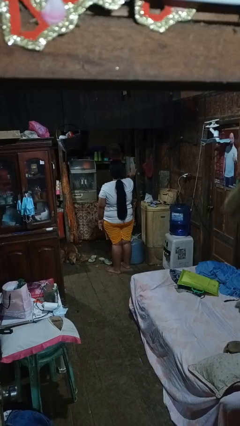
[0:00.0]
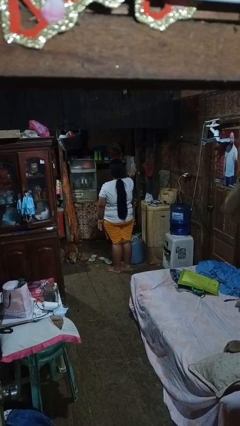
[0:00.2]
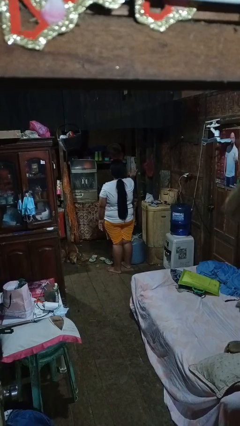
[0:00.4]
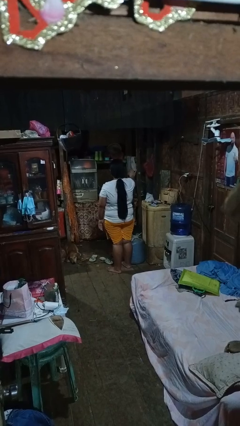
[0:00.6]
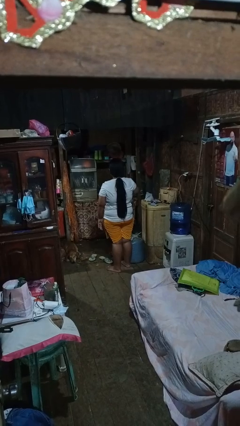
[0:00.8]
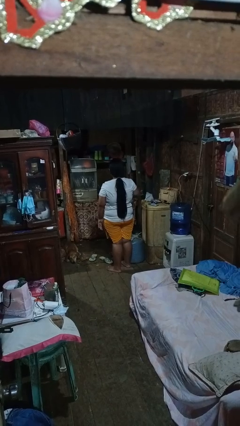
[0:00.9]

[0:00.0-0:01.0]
person gestures stop

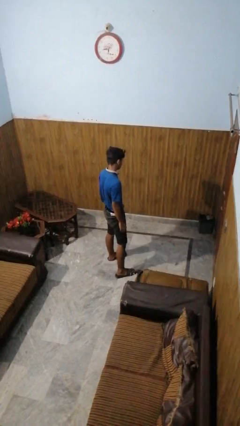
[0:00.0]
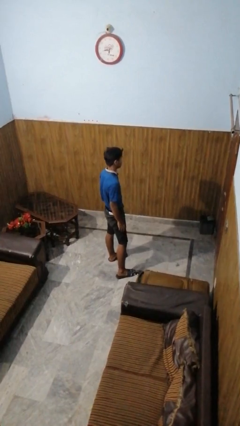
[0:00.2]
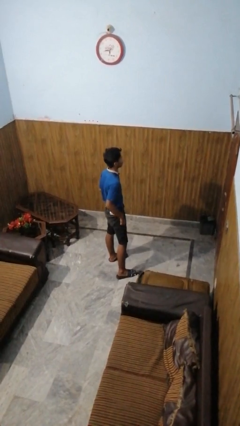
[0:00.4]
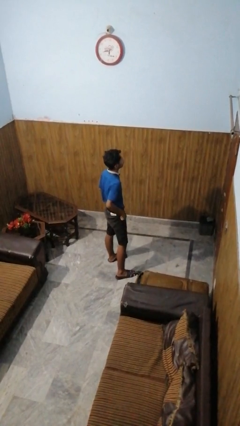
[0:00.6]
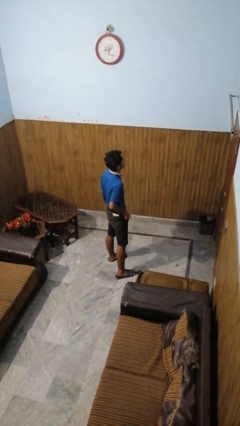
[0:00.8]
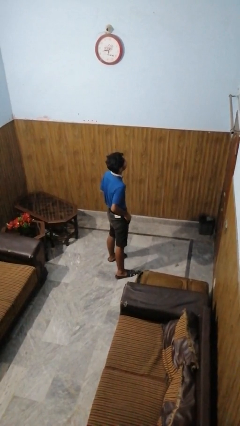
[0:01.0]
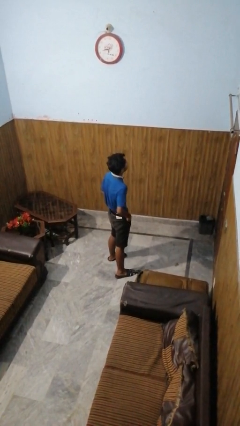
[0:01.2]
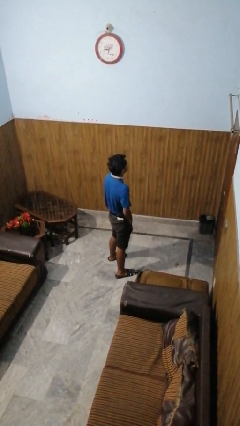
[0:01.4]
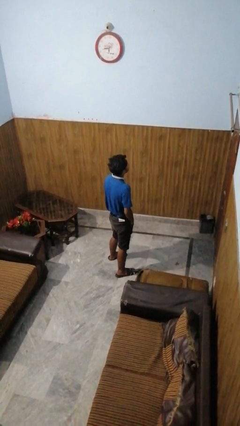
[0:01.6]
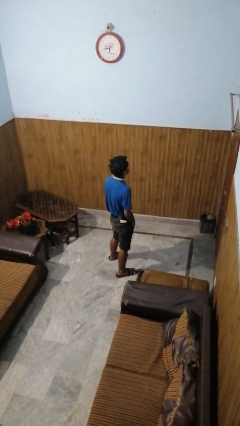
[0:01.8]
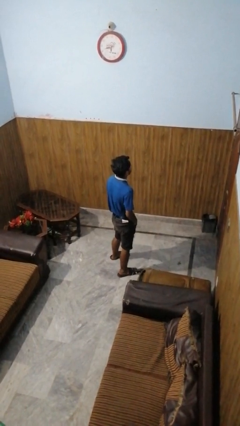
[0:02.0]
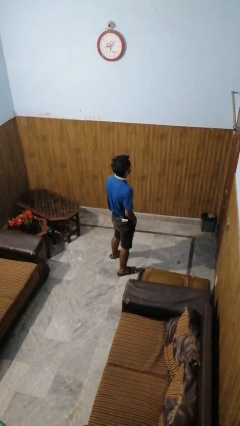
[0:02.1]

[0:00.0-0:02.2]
person puts hands in back pockets

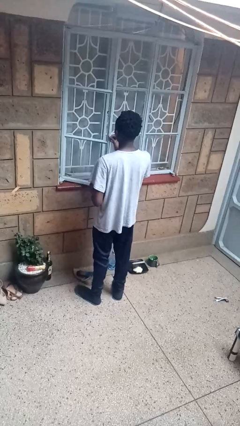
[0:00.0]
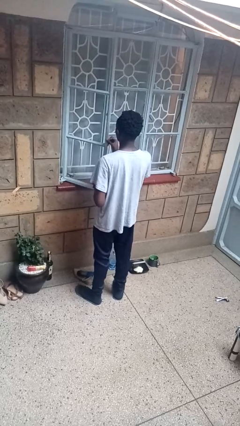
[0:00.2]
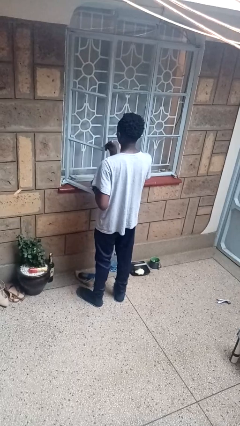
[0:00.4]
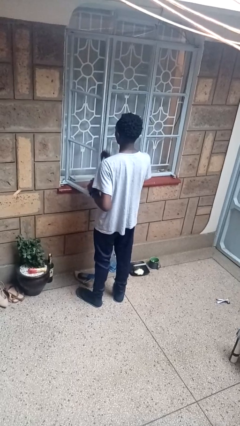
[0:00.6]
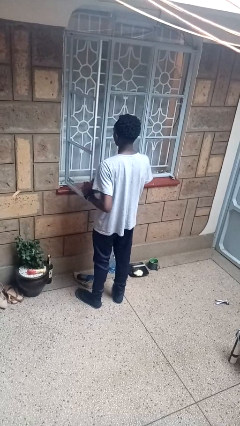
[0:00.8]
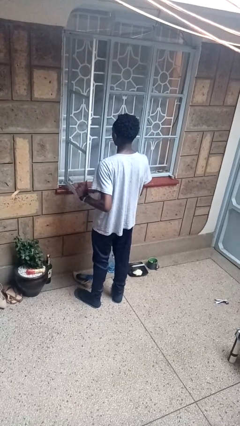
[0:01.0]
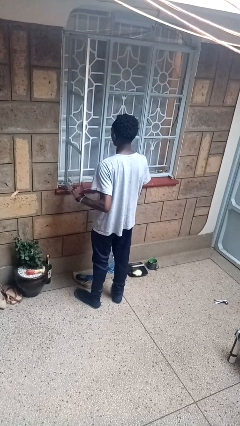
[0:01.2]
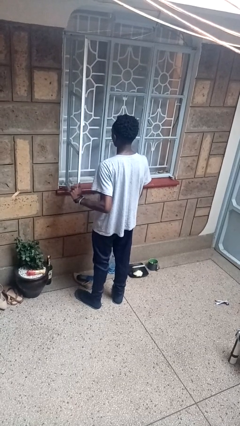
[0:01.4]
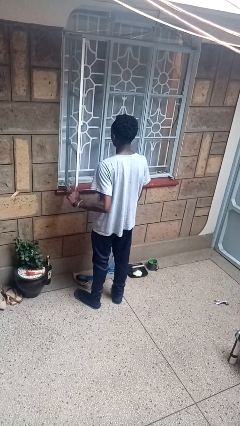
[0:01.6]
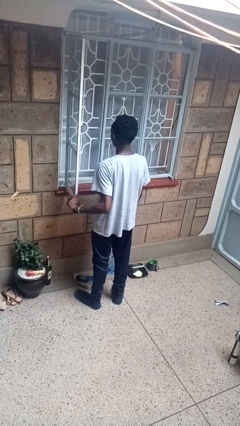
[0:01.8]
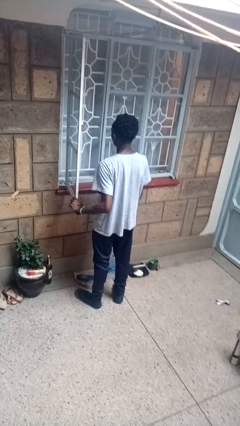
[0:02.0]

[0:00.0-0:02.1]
person opens home window

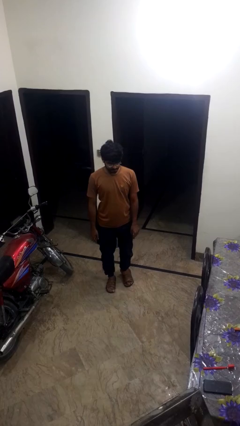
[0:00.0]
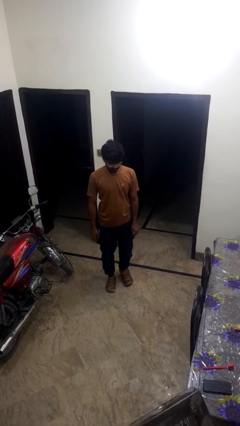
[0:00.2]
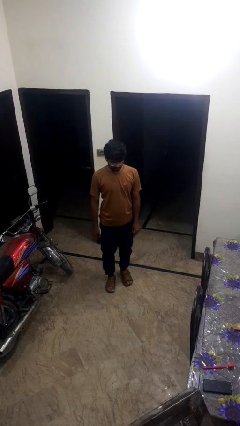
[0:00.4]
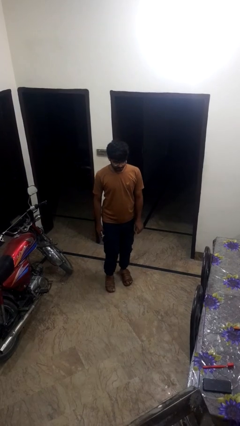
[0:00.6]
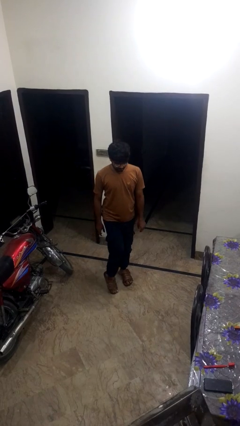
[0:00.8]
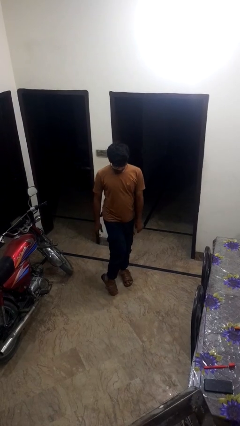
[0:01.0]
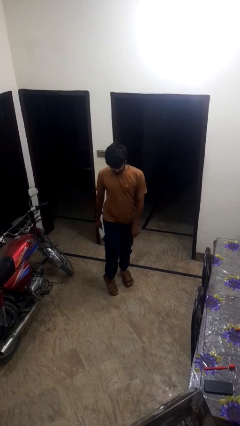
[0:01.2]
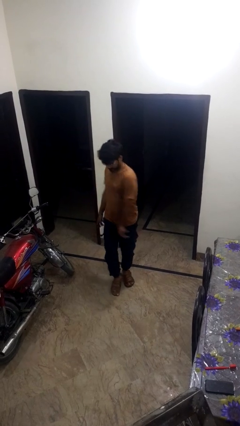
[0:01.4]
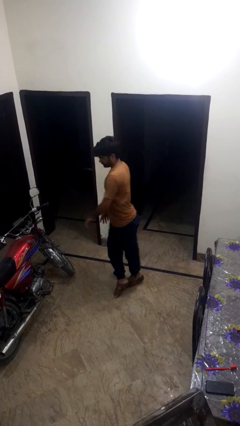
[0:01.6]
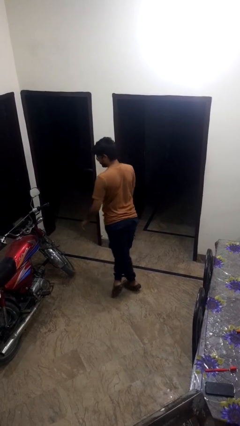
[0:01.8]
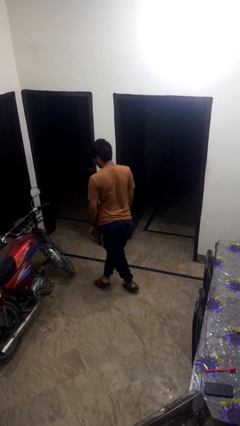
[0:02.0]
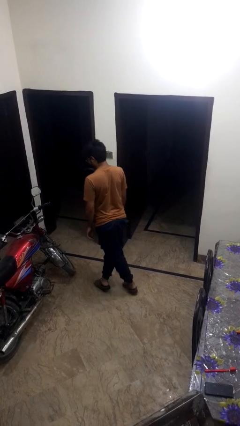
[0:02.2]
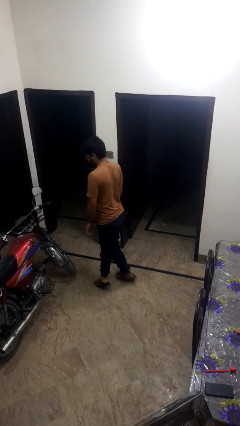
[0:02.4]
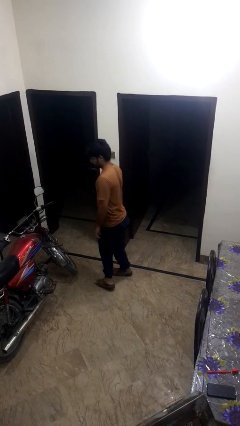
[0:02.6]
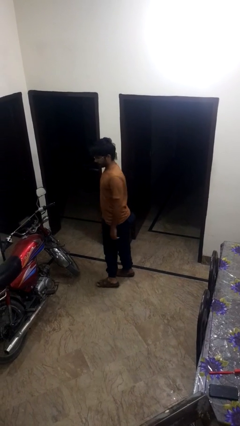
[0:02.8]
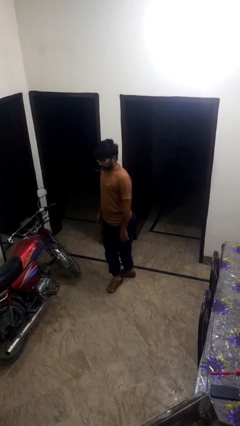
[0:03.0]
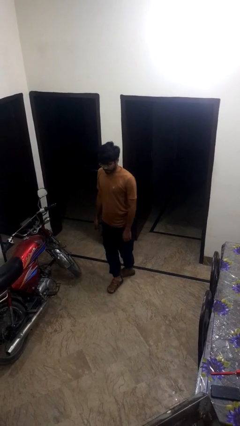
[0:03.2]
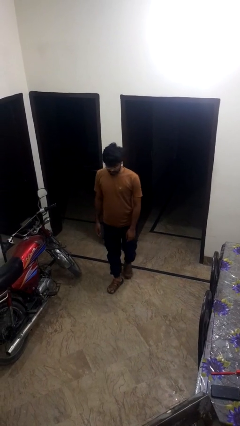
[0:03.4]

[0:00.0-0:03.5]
person twirls

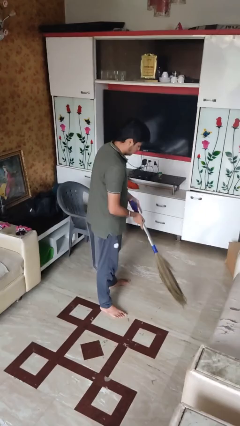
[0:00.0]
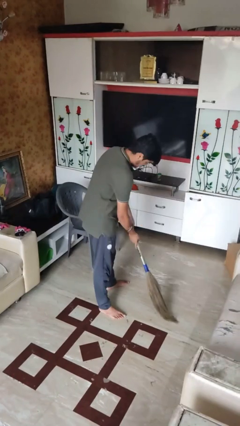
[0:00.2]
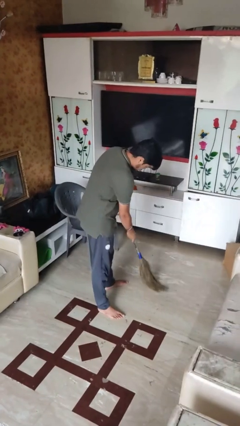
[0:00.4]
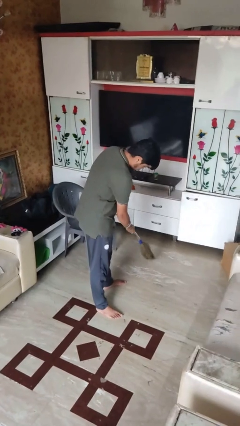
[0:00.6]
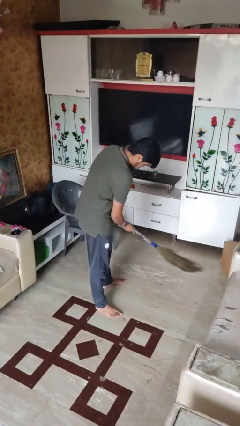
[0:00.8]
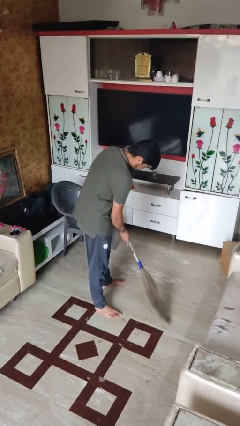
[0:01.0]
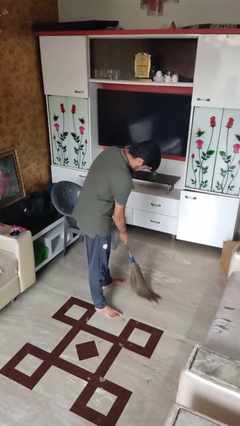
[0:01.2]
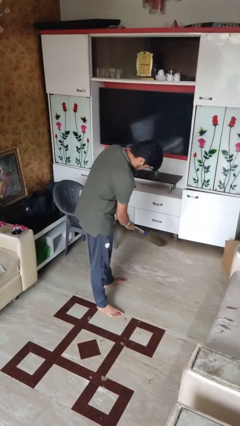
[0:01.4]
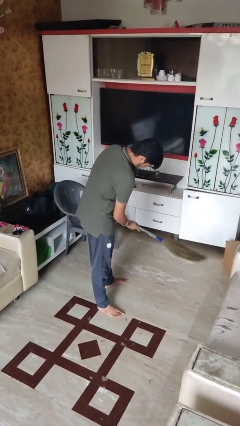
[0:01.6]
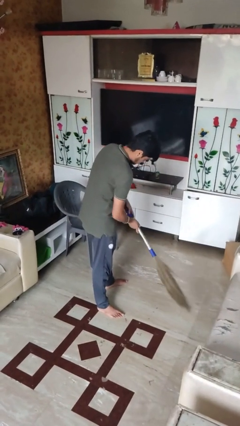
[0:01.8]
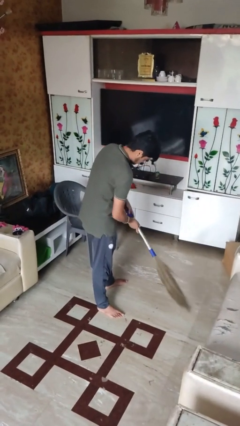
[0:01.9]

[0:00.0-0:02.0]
person sweeps floor

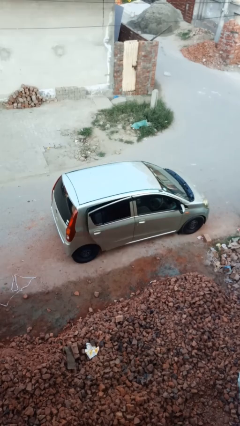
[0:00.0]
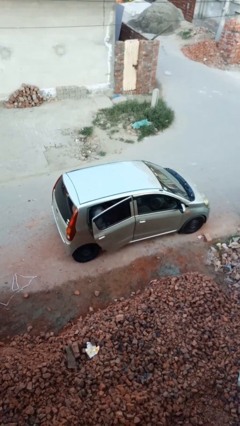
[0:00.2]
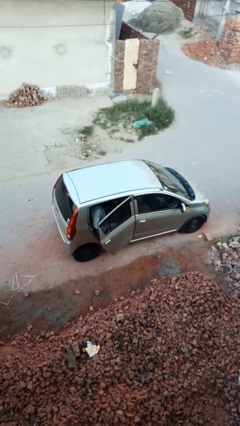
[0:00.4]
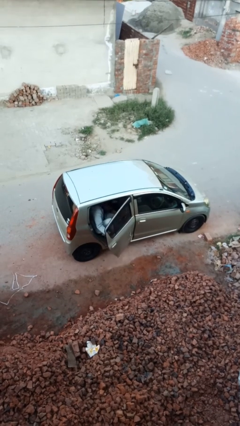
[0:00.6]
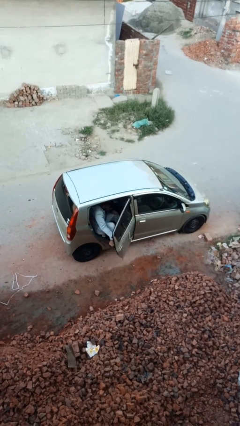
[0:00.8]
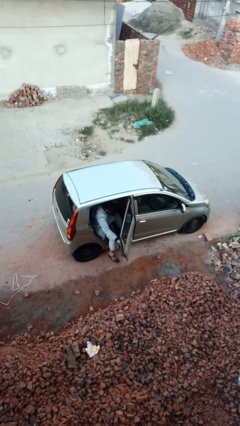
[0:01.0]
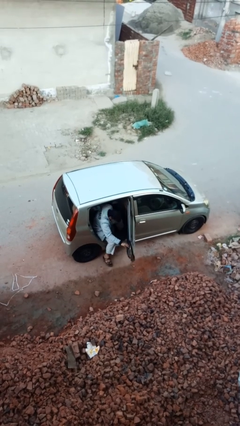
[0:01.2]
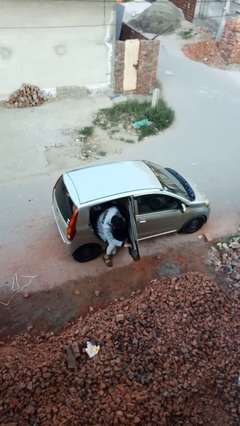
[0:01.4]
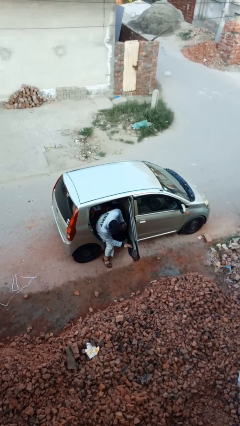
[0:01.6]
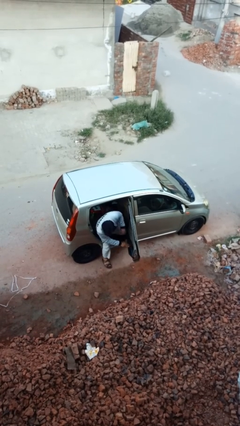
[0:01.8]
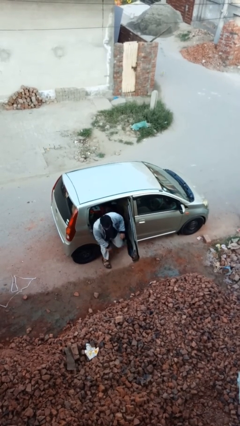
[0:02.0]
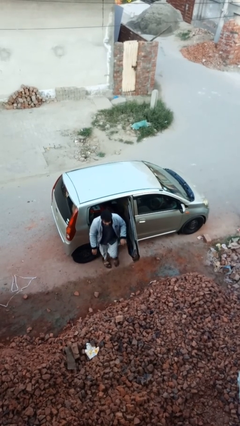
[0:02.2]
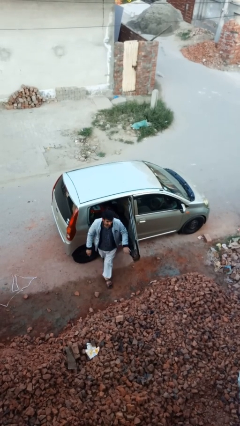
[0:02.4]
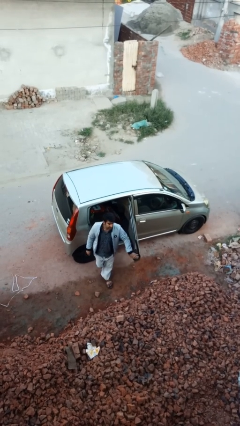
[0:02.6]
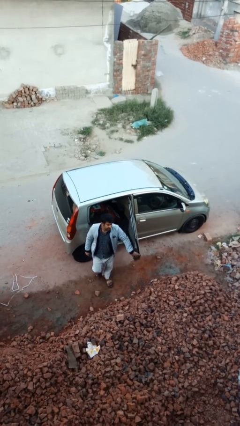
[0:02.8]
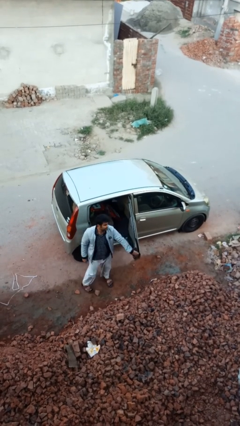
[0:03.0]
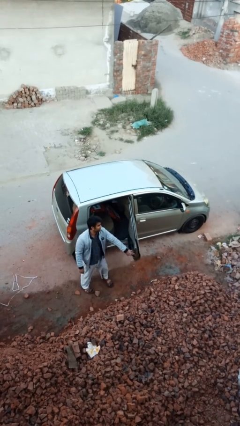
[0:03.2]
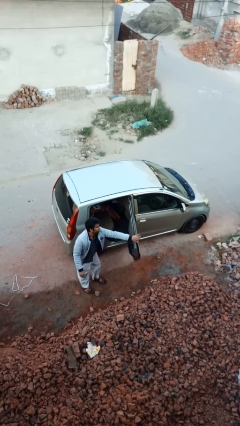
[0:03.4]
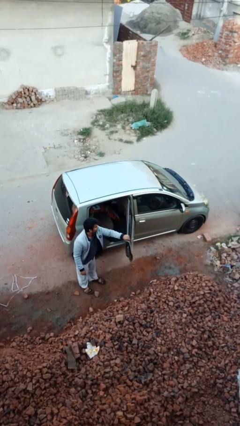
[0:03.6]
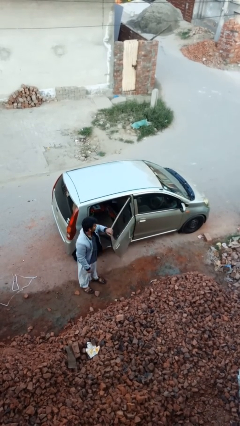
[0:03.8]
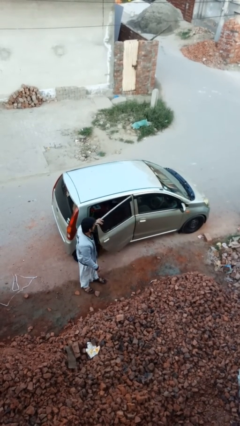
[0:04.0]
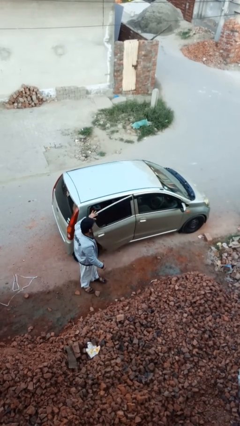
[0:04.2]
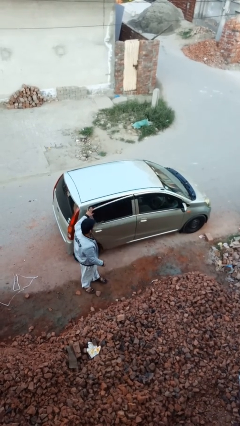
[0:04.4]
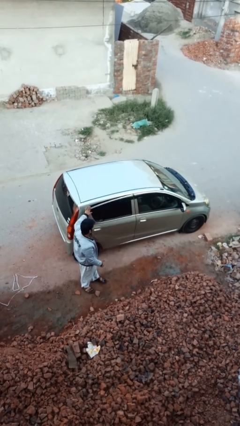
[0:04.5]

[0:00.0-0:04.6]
car drops off person

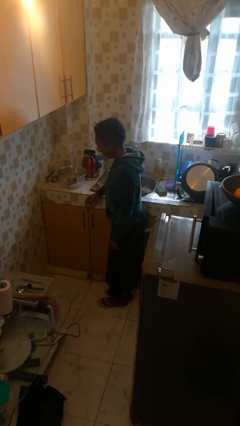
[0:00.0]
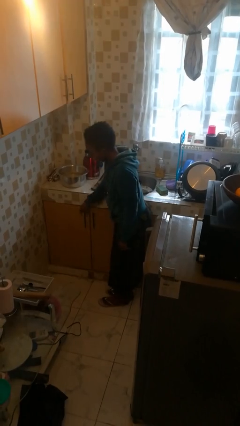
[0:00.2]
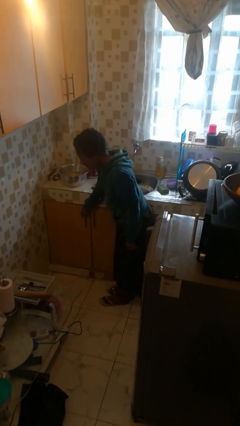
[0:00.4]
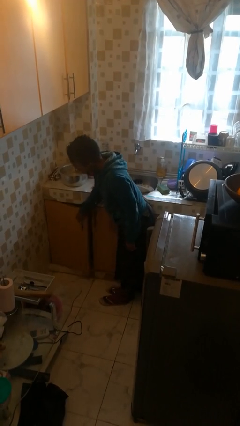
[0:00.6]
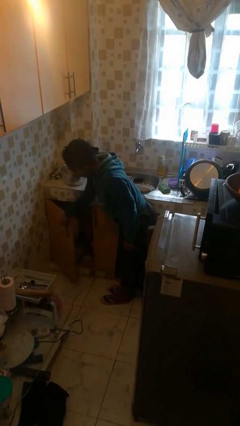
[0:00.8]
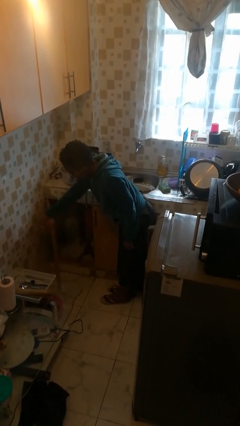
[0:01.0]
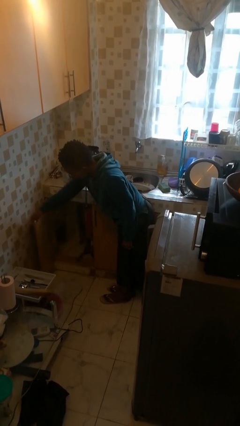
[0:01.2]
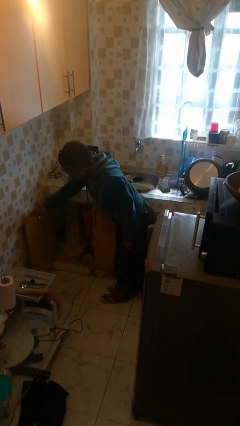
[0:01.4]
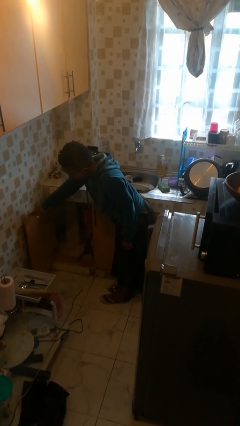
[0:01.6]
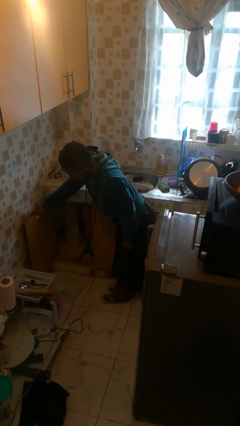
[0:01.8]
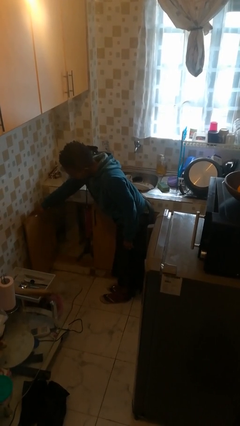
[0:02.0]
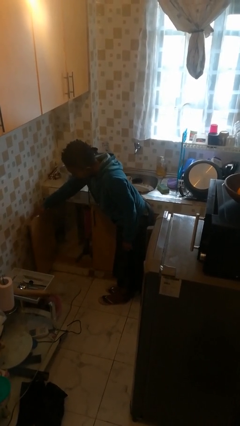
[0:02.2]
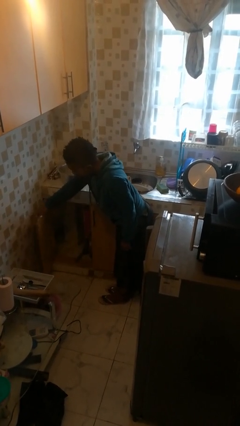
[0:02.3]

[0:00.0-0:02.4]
person opens cabinet
